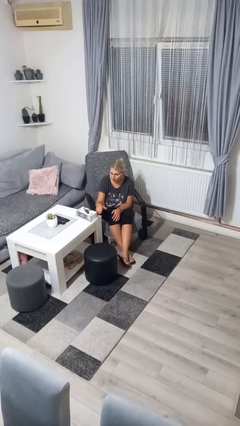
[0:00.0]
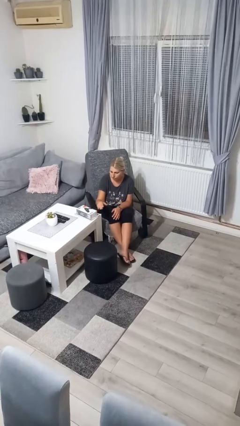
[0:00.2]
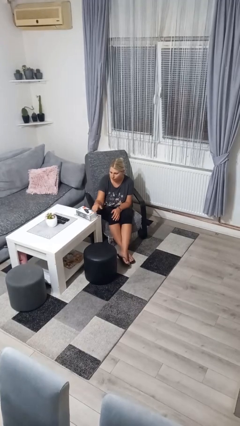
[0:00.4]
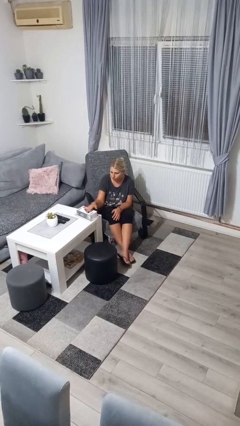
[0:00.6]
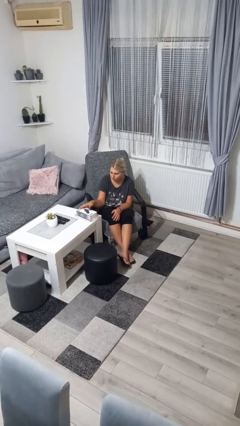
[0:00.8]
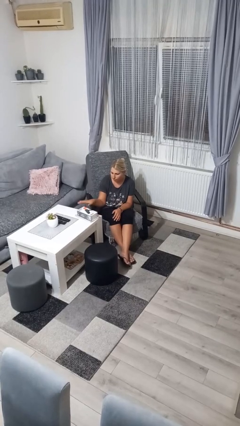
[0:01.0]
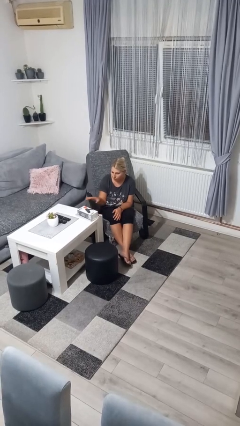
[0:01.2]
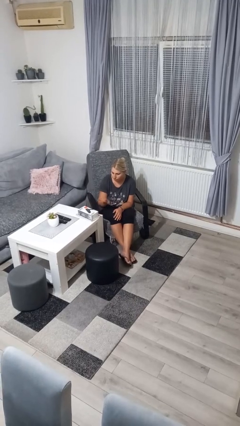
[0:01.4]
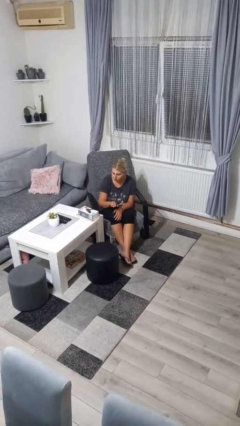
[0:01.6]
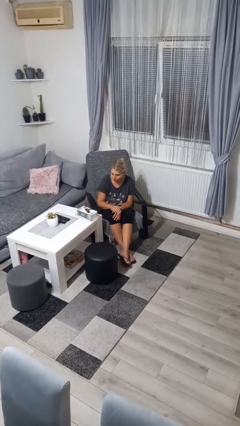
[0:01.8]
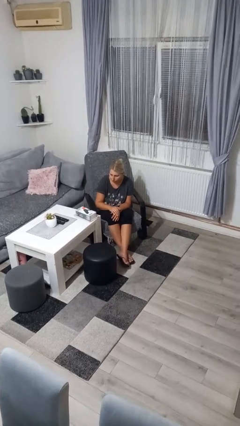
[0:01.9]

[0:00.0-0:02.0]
person waves hand over object

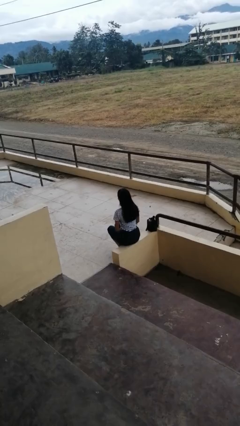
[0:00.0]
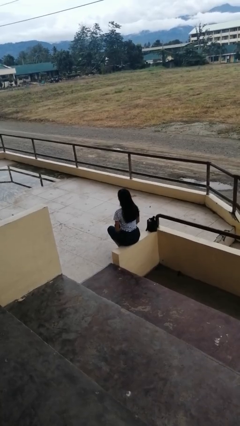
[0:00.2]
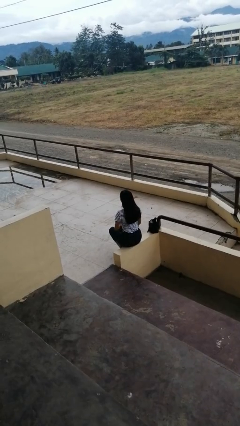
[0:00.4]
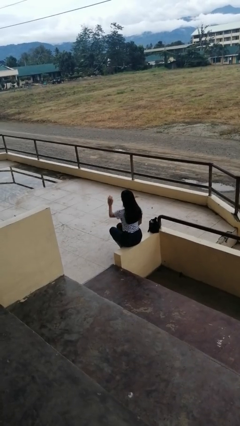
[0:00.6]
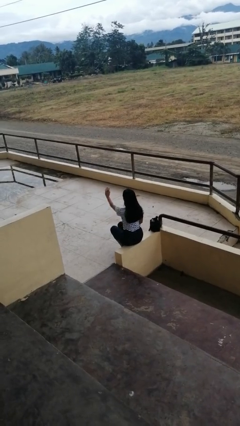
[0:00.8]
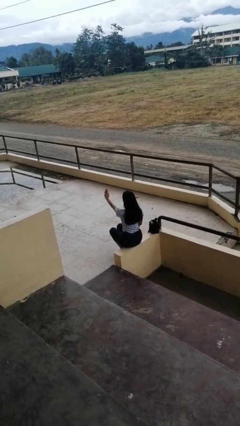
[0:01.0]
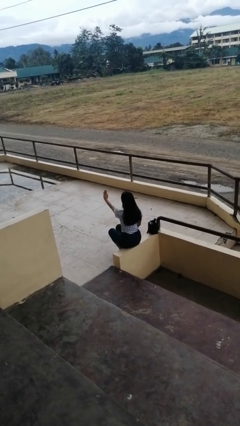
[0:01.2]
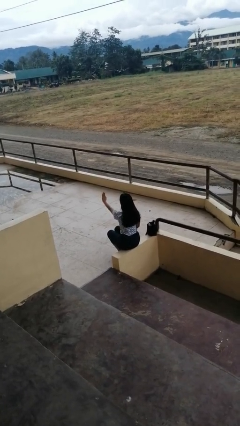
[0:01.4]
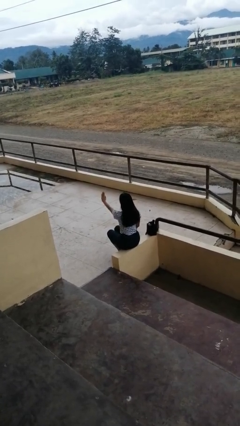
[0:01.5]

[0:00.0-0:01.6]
person gestures stop

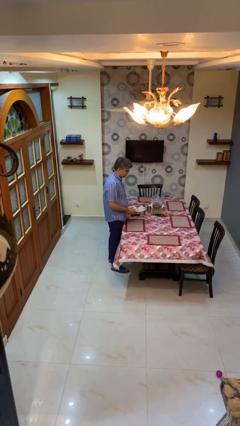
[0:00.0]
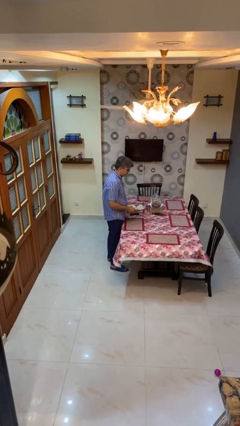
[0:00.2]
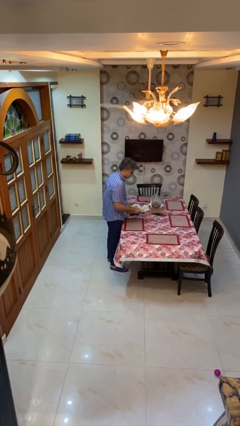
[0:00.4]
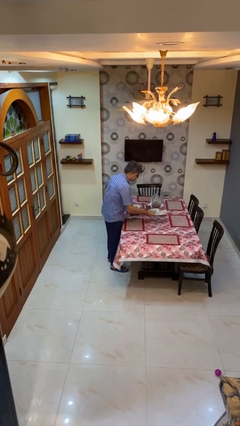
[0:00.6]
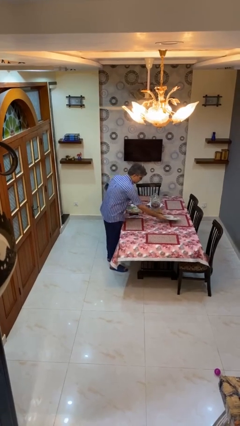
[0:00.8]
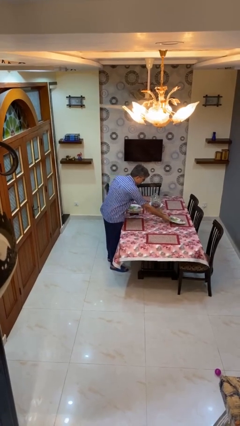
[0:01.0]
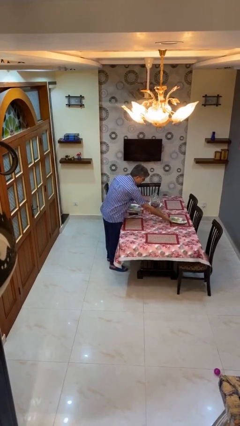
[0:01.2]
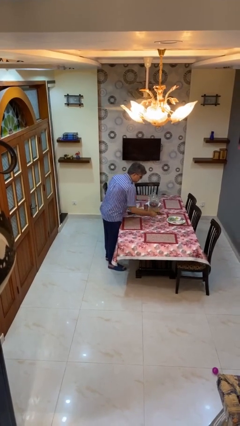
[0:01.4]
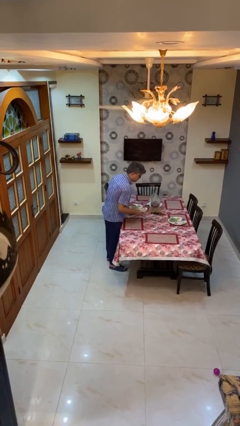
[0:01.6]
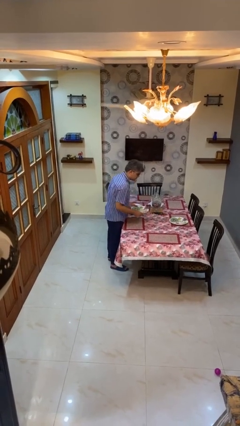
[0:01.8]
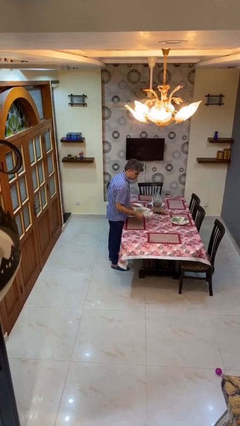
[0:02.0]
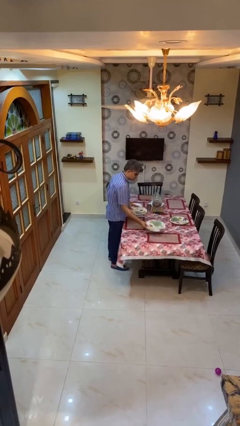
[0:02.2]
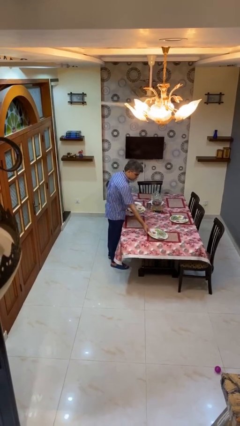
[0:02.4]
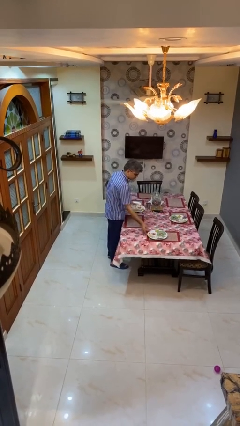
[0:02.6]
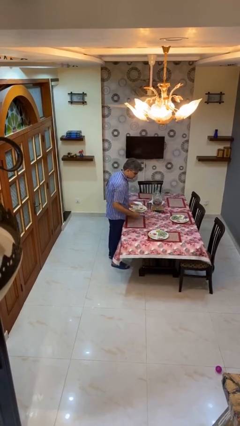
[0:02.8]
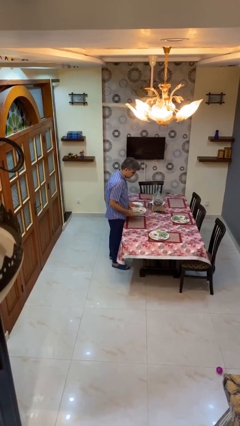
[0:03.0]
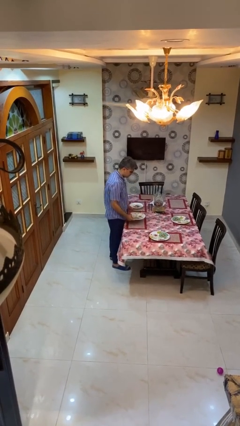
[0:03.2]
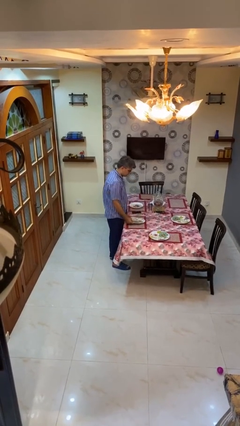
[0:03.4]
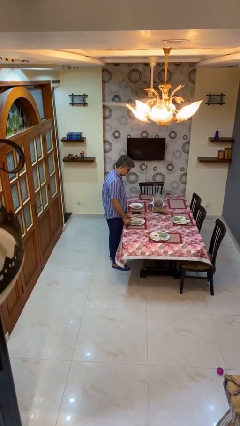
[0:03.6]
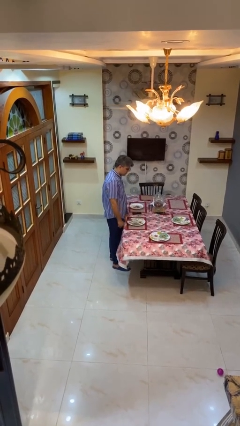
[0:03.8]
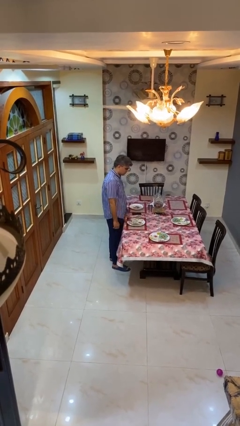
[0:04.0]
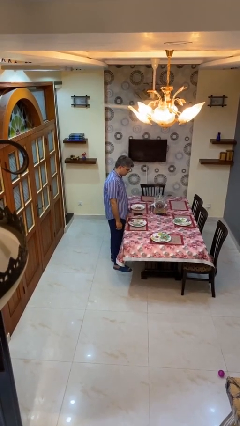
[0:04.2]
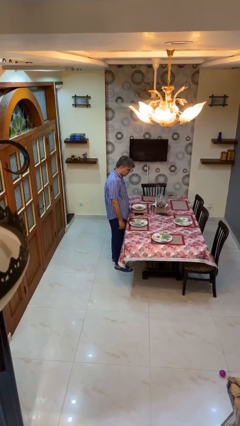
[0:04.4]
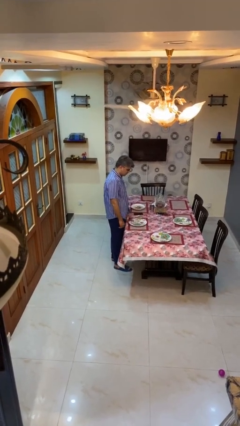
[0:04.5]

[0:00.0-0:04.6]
person sets table

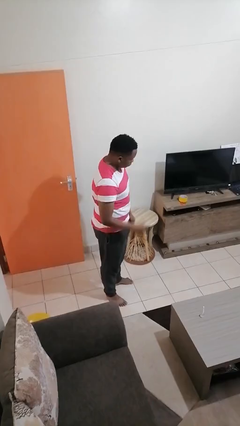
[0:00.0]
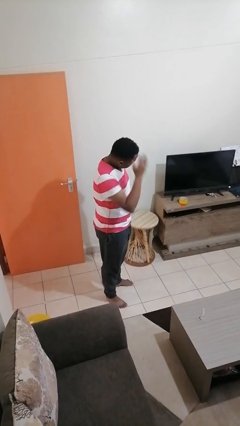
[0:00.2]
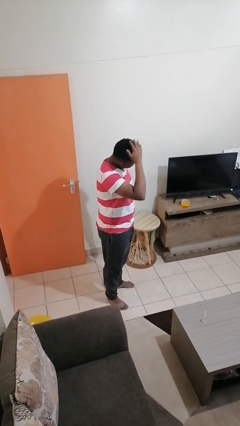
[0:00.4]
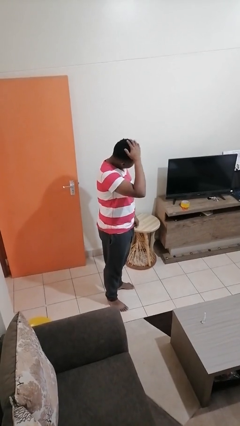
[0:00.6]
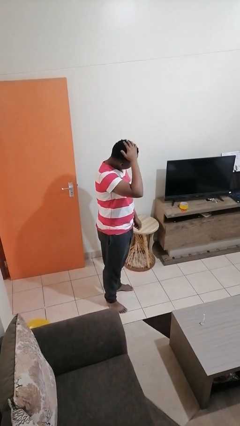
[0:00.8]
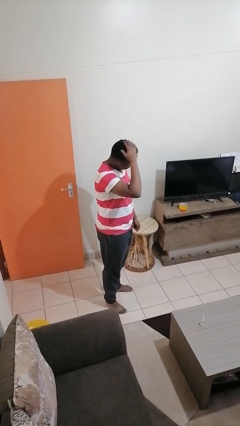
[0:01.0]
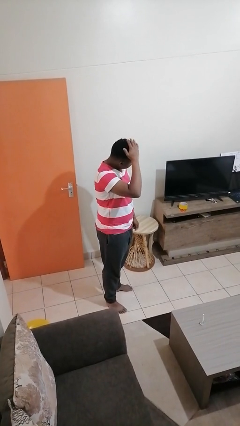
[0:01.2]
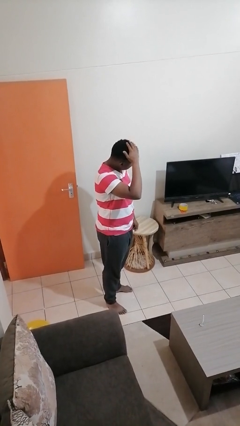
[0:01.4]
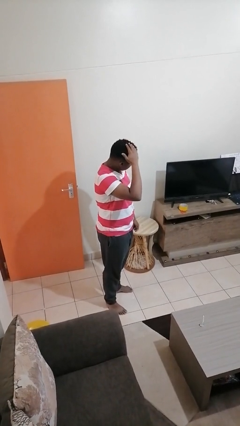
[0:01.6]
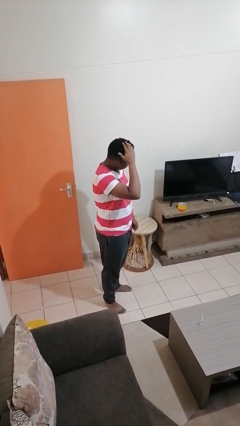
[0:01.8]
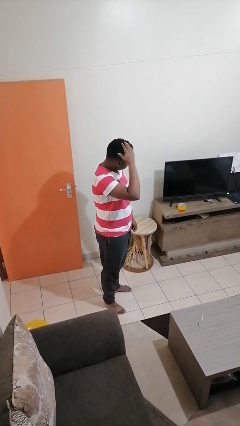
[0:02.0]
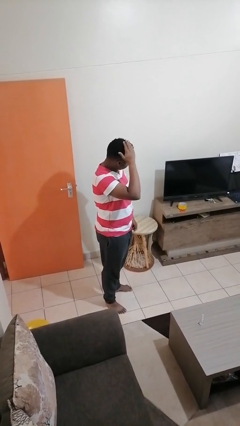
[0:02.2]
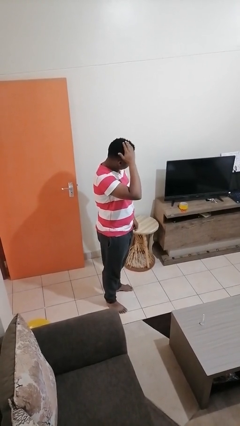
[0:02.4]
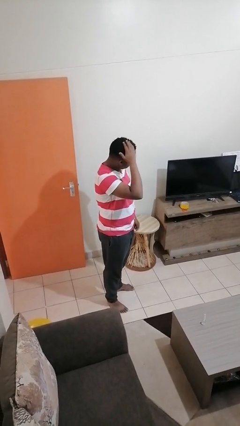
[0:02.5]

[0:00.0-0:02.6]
person pats head

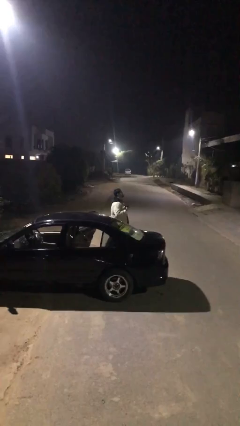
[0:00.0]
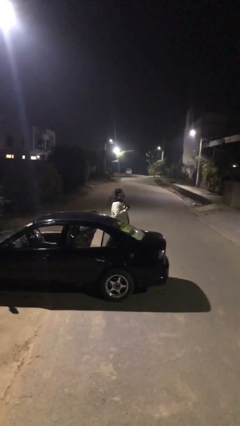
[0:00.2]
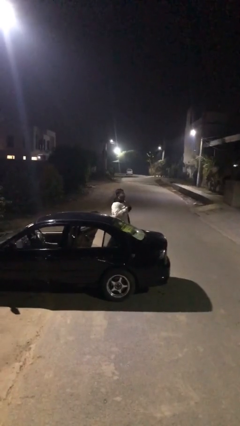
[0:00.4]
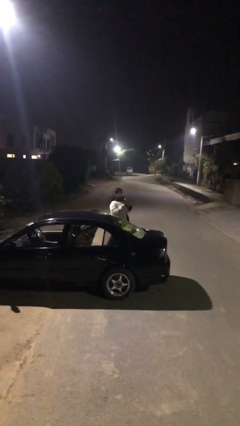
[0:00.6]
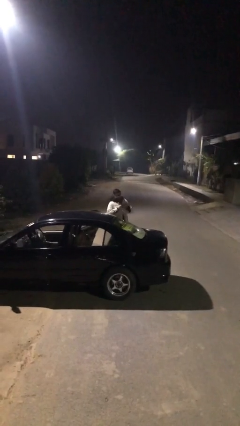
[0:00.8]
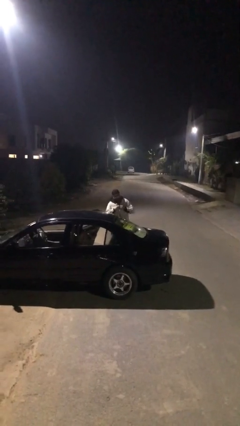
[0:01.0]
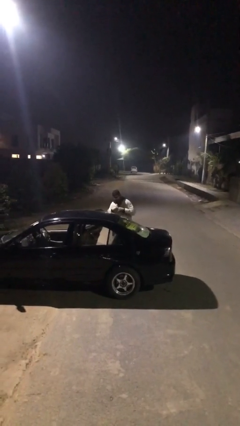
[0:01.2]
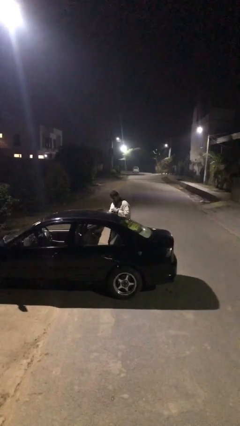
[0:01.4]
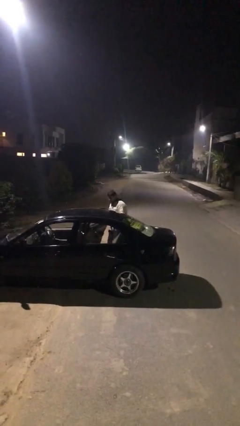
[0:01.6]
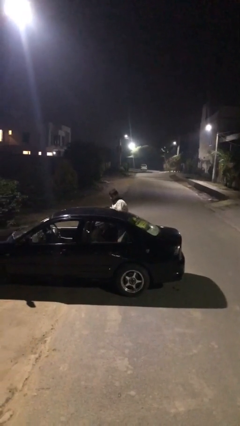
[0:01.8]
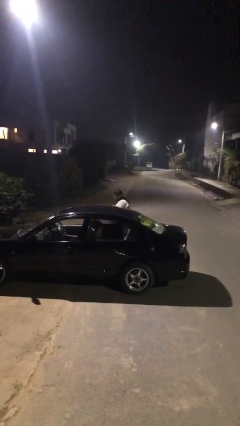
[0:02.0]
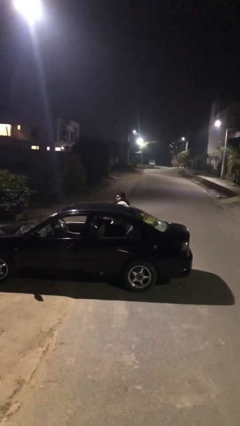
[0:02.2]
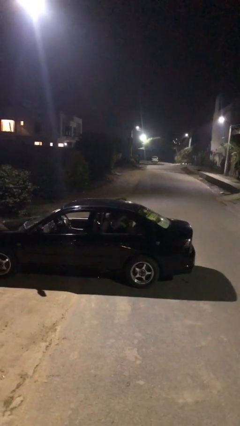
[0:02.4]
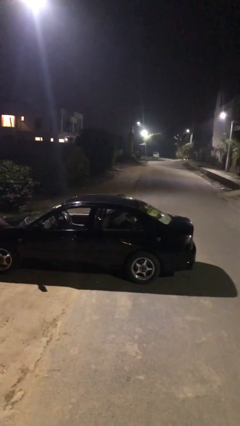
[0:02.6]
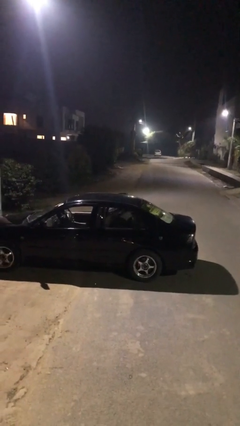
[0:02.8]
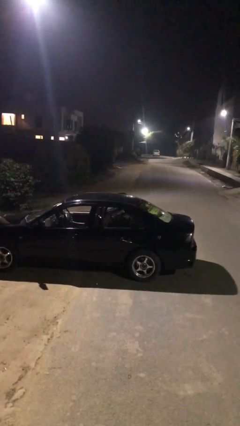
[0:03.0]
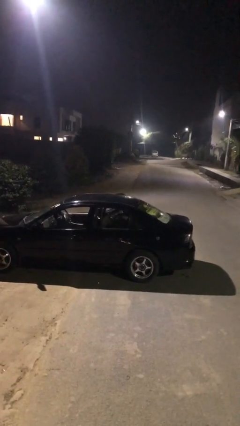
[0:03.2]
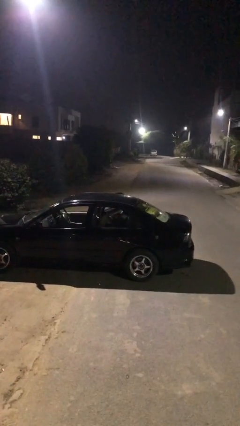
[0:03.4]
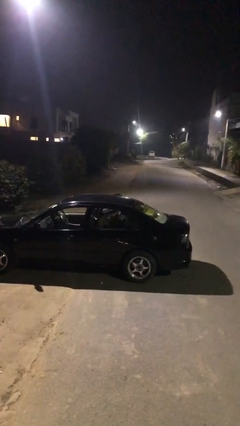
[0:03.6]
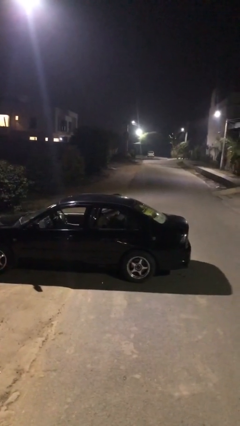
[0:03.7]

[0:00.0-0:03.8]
person enters car

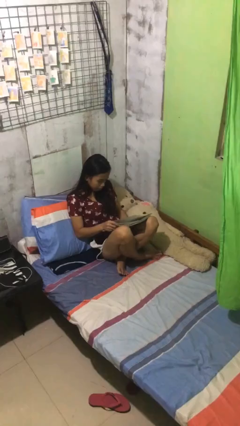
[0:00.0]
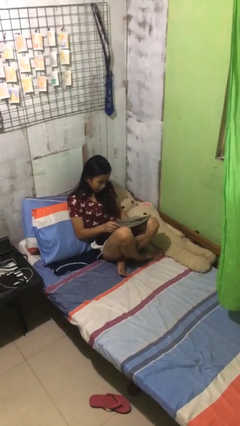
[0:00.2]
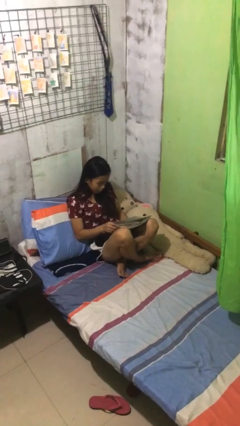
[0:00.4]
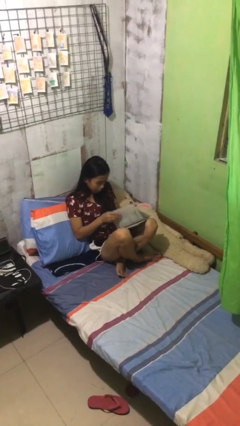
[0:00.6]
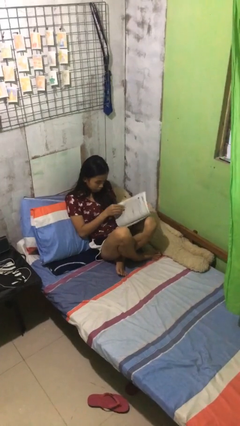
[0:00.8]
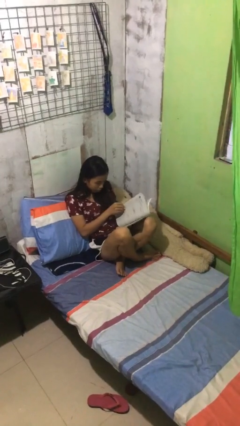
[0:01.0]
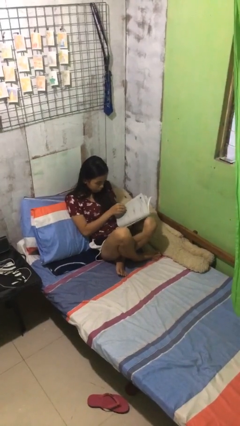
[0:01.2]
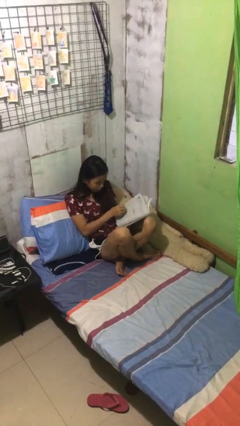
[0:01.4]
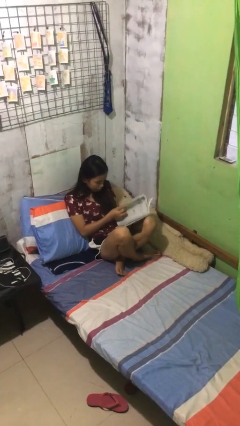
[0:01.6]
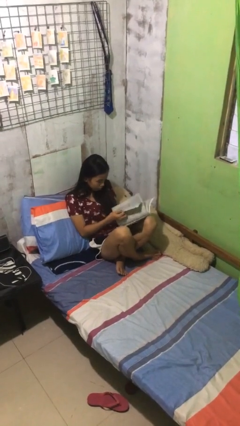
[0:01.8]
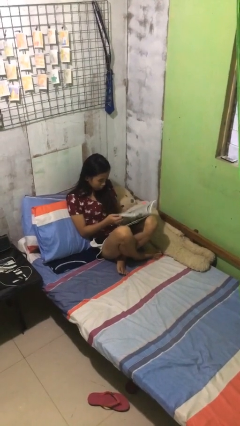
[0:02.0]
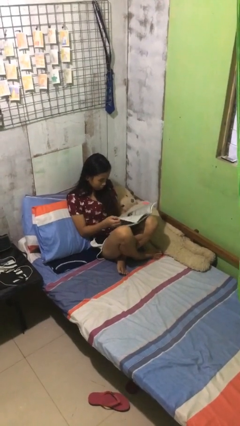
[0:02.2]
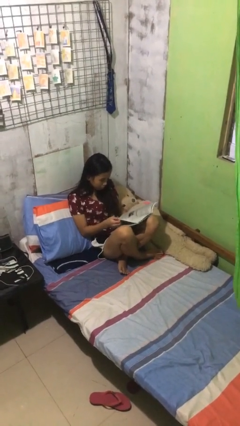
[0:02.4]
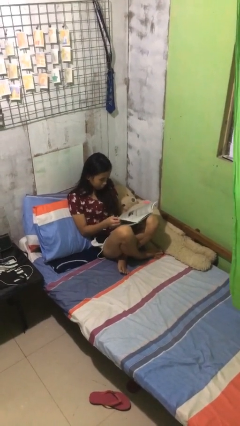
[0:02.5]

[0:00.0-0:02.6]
person reads document

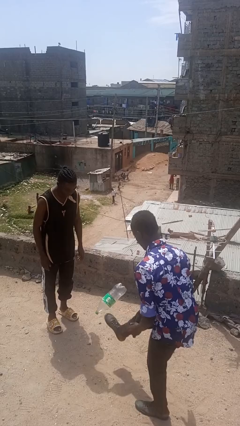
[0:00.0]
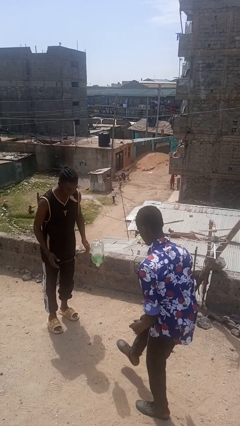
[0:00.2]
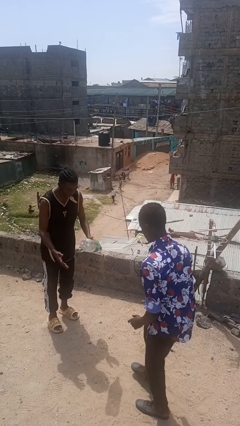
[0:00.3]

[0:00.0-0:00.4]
person kicks object to person
